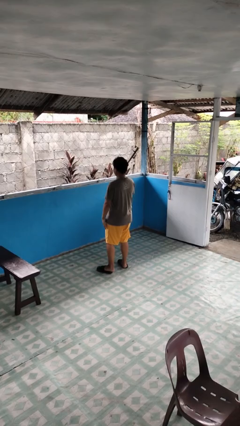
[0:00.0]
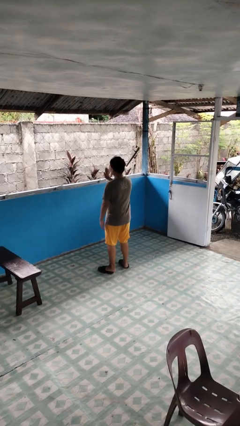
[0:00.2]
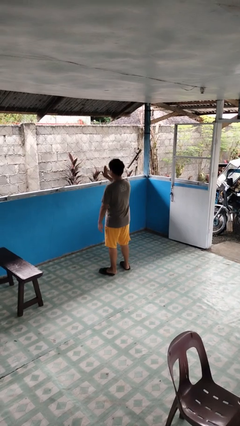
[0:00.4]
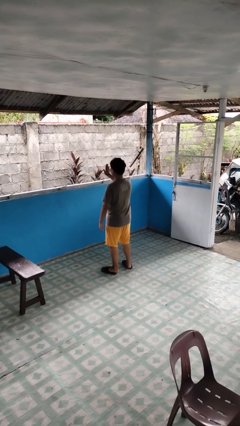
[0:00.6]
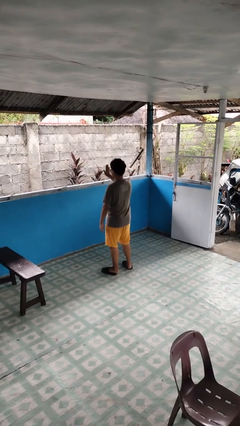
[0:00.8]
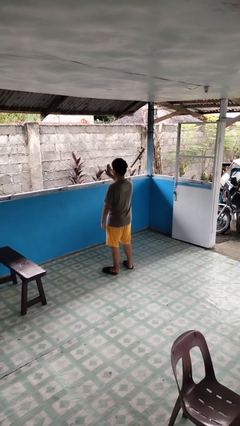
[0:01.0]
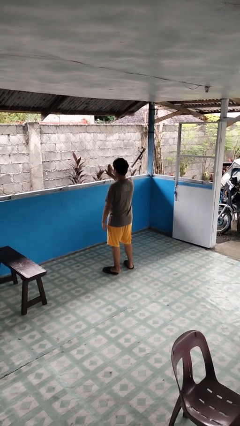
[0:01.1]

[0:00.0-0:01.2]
person gestures stop

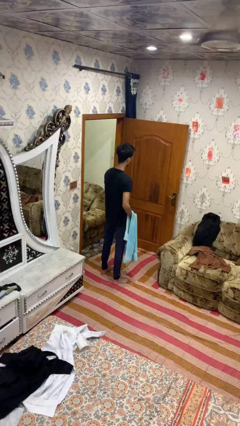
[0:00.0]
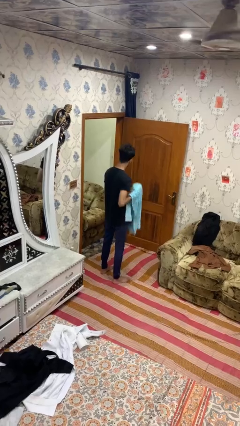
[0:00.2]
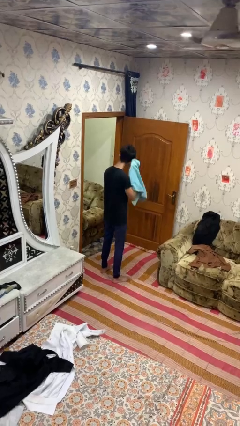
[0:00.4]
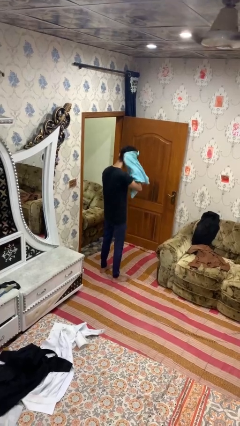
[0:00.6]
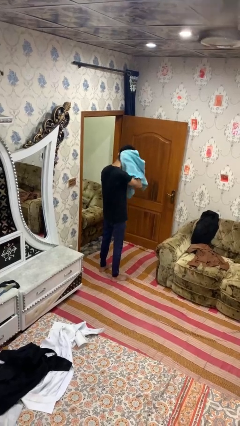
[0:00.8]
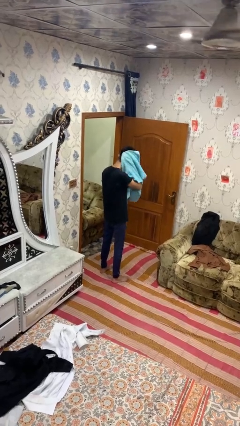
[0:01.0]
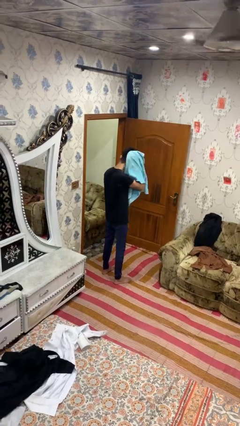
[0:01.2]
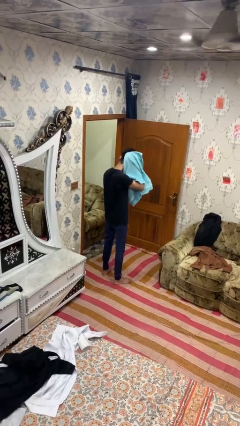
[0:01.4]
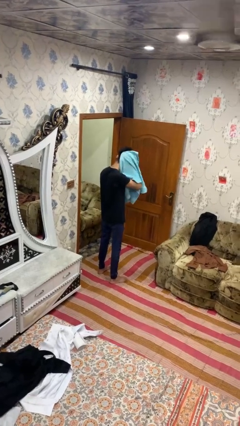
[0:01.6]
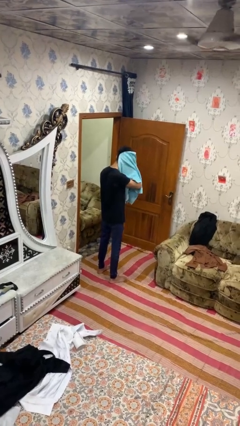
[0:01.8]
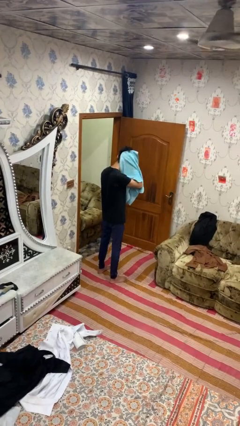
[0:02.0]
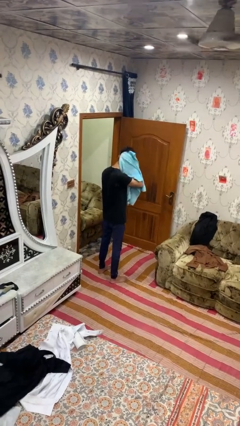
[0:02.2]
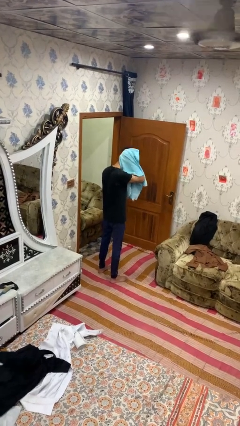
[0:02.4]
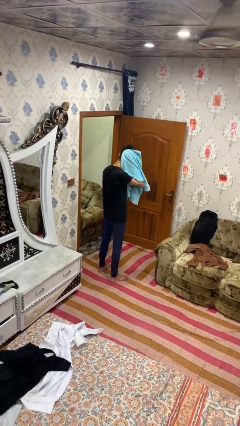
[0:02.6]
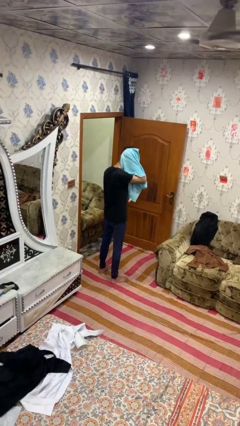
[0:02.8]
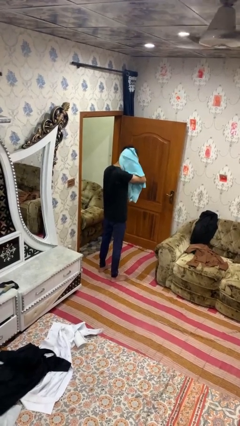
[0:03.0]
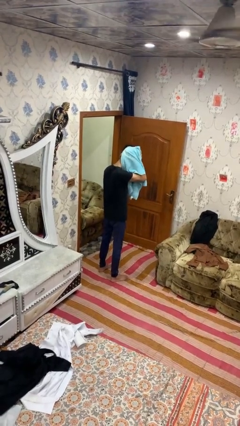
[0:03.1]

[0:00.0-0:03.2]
person dries hair with towel

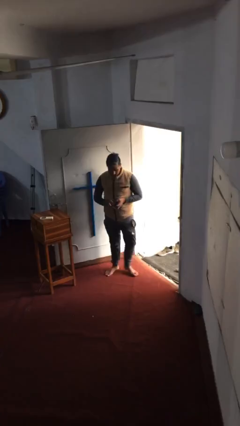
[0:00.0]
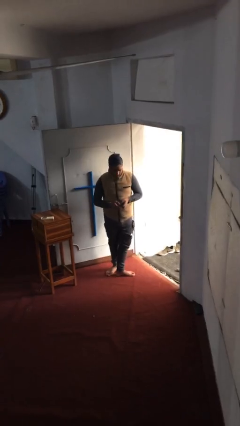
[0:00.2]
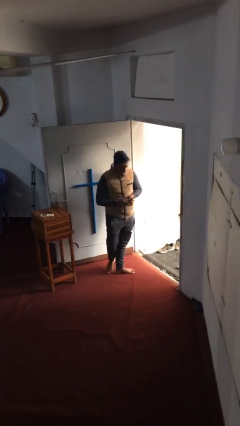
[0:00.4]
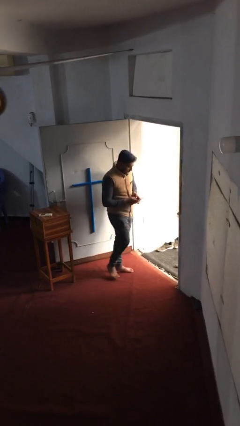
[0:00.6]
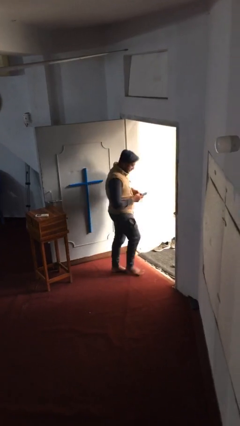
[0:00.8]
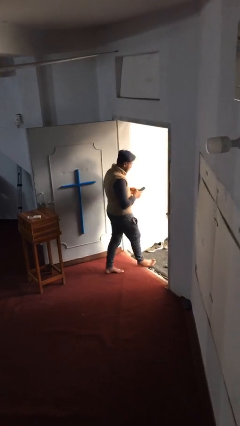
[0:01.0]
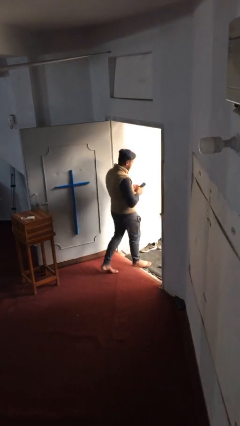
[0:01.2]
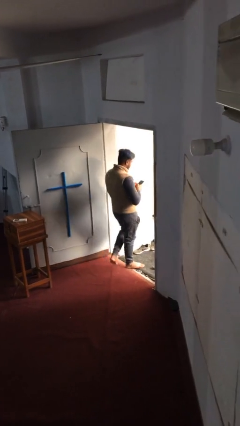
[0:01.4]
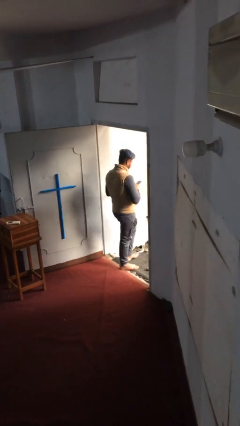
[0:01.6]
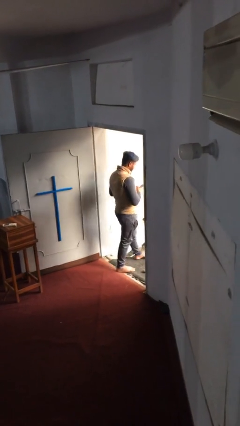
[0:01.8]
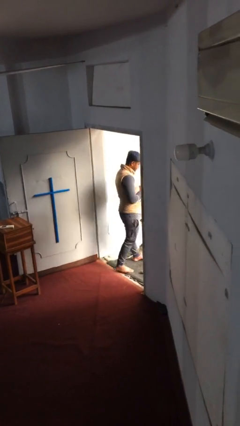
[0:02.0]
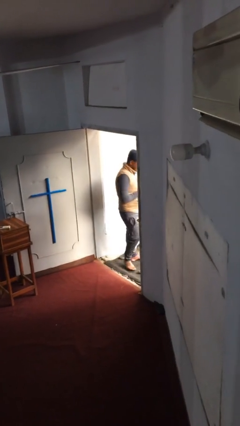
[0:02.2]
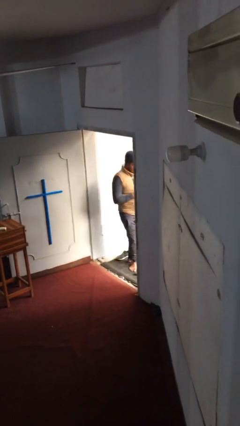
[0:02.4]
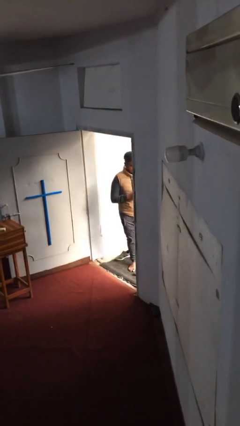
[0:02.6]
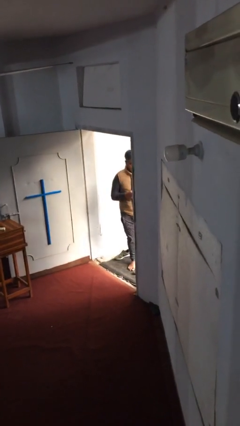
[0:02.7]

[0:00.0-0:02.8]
person exits scene through structure

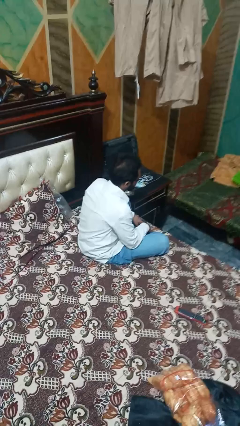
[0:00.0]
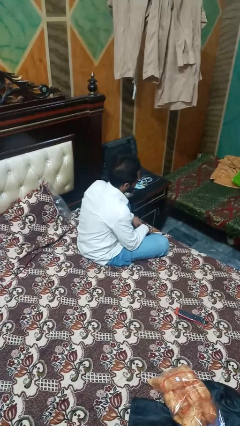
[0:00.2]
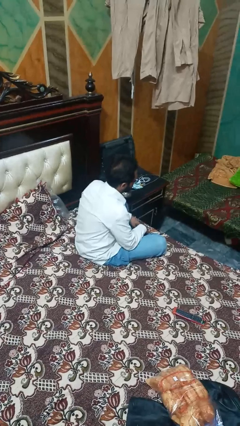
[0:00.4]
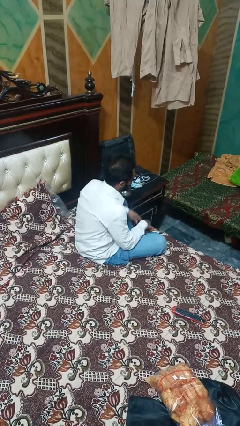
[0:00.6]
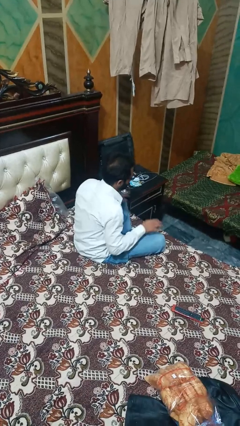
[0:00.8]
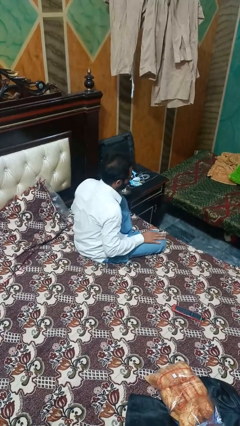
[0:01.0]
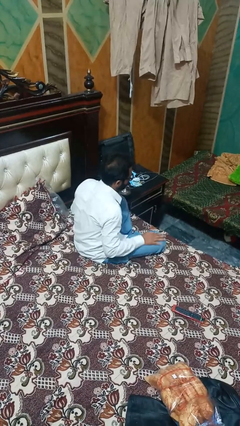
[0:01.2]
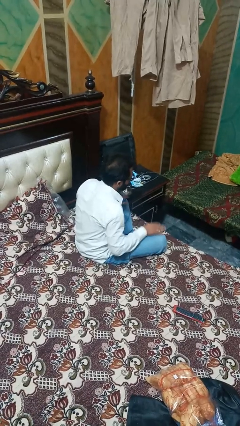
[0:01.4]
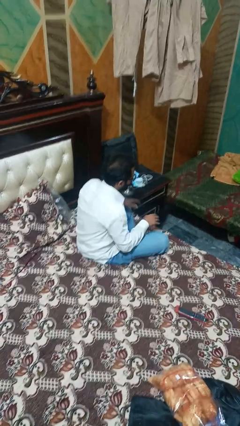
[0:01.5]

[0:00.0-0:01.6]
person slaps hands on thighs

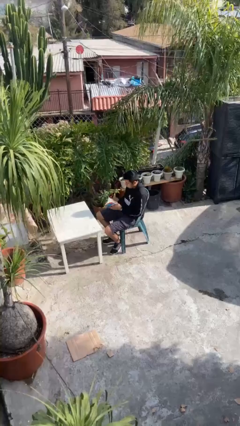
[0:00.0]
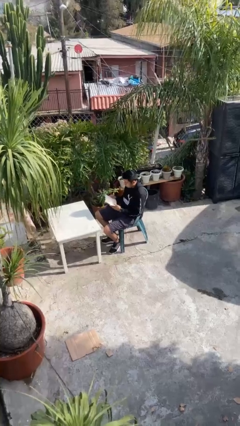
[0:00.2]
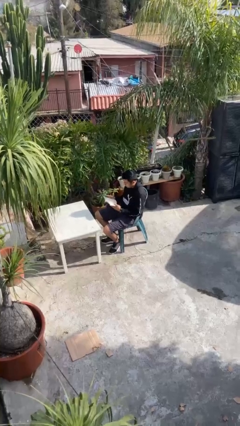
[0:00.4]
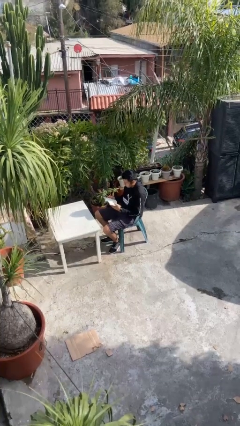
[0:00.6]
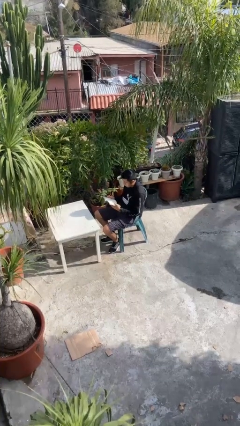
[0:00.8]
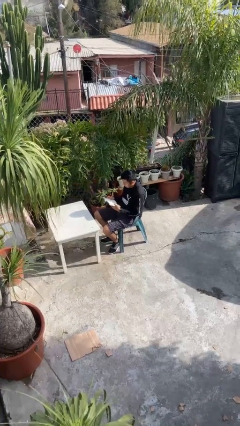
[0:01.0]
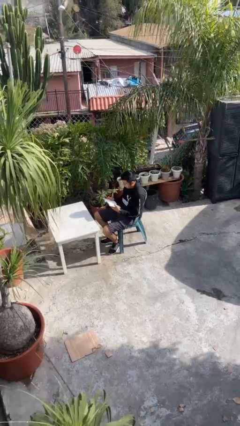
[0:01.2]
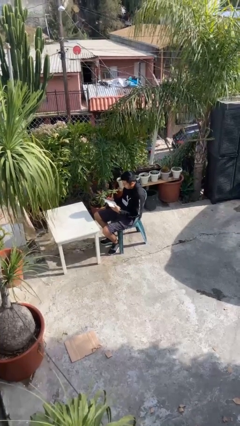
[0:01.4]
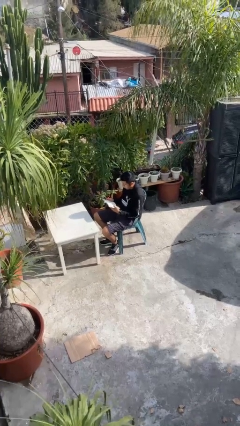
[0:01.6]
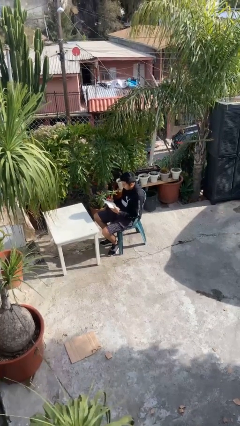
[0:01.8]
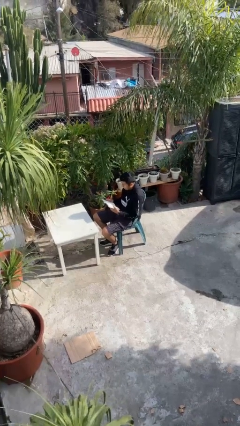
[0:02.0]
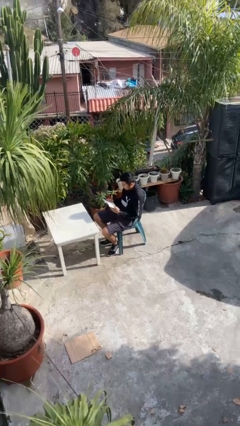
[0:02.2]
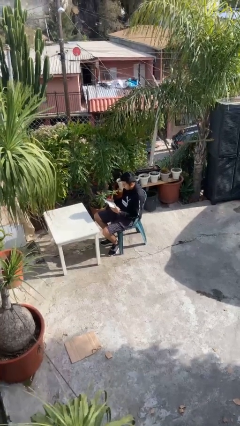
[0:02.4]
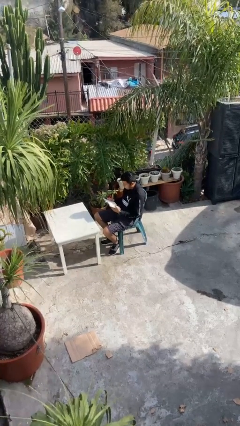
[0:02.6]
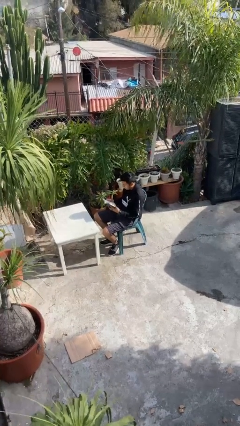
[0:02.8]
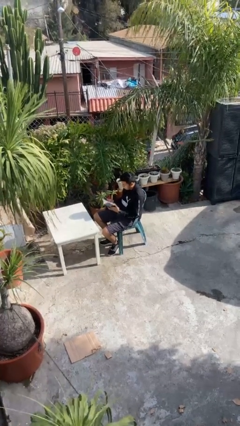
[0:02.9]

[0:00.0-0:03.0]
person reads document

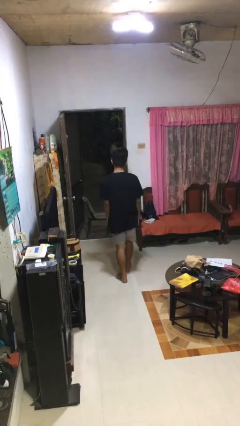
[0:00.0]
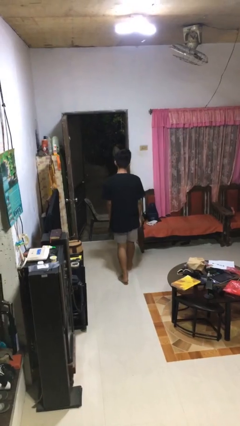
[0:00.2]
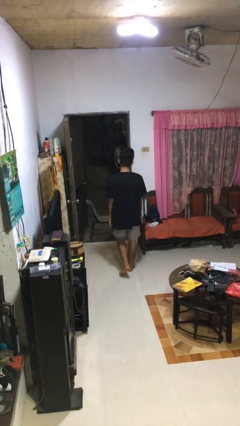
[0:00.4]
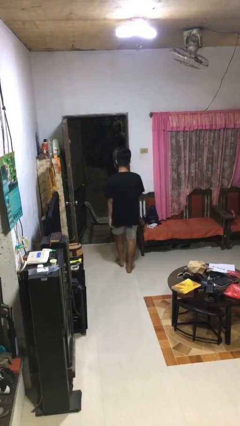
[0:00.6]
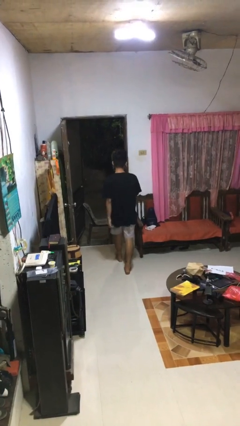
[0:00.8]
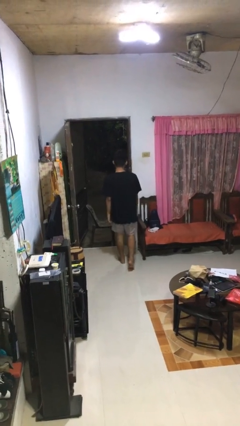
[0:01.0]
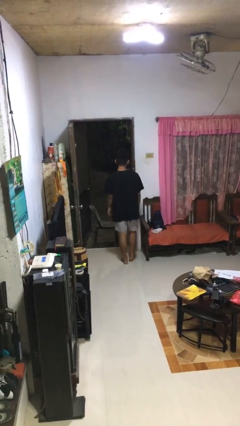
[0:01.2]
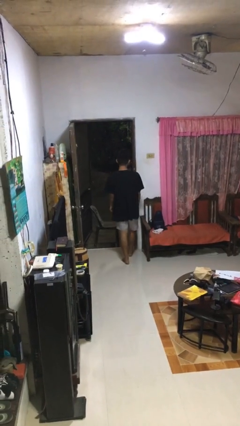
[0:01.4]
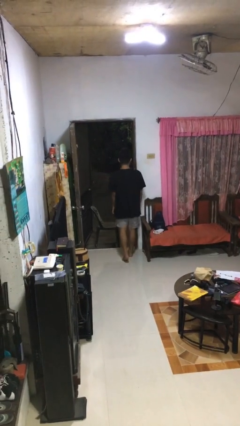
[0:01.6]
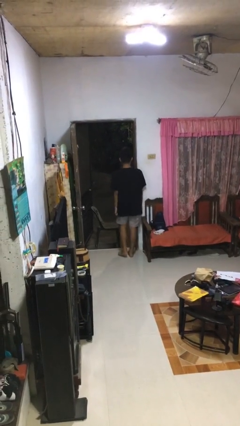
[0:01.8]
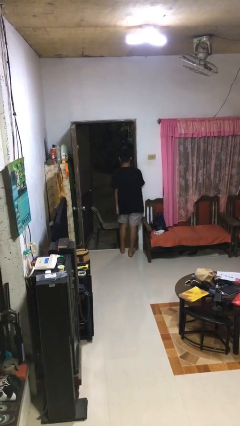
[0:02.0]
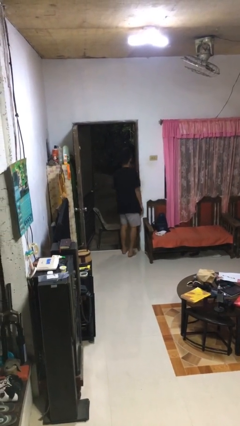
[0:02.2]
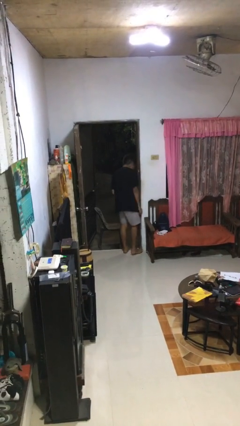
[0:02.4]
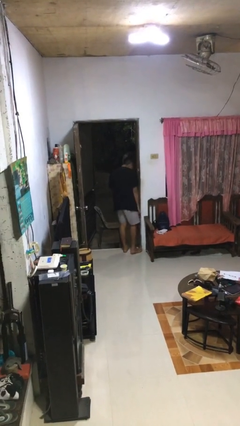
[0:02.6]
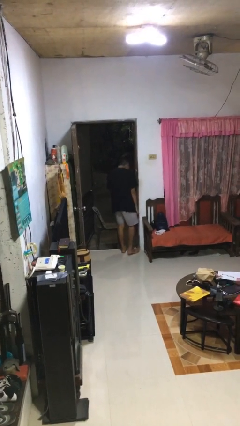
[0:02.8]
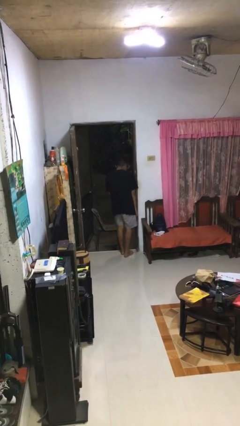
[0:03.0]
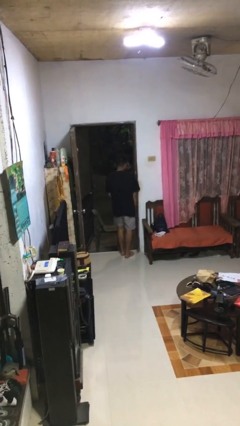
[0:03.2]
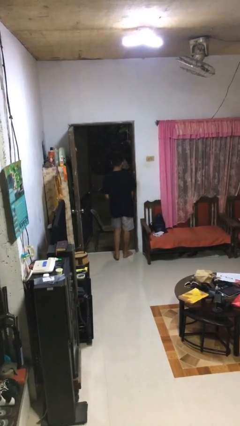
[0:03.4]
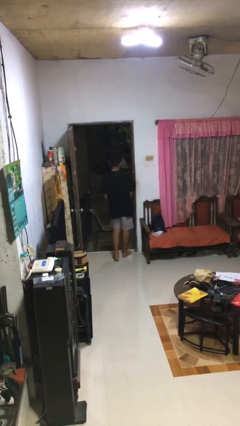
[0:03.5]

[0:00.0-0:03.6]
person bumps into wall

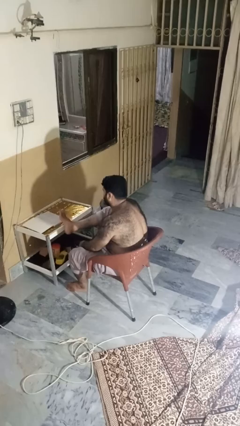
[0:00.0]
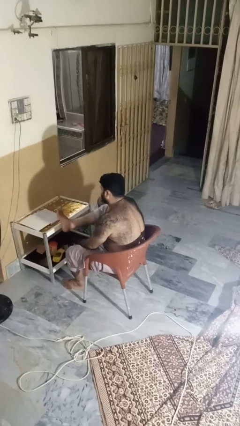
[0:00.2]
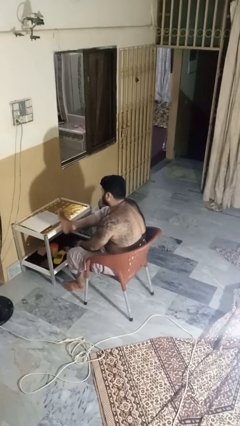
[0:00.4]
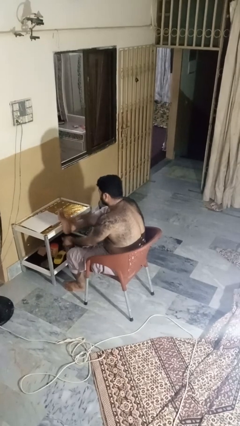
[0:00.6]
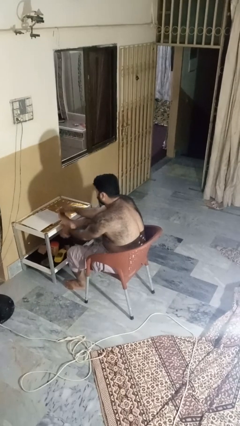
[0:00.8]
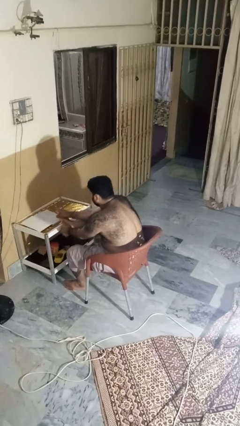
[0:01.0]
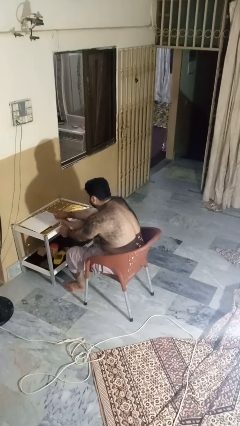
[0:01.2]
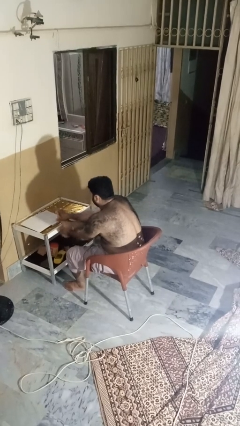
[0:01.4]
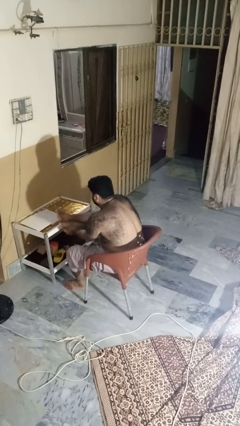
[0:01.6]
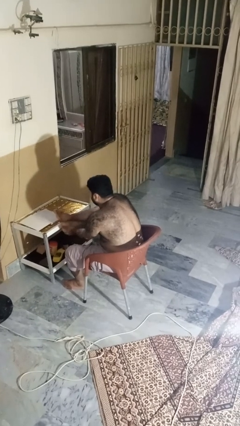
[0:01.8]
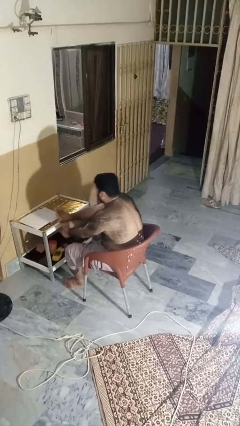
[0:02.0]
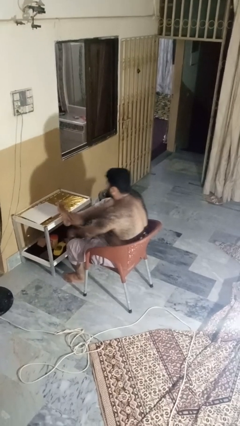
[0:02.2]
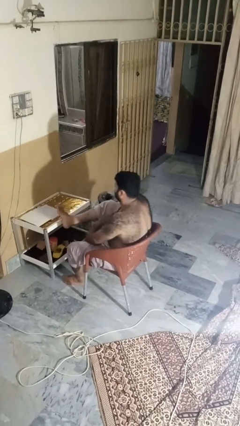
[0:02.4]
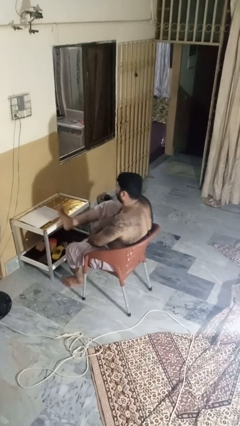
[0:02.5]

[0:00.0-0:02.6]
person stubs toe
